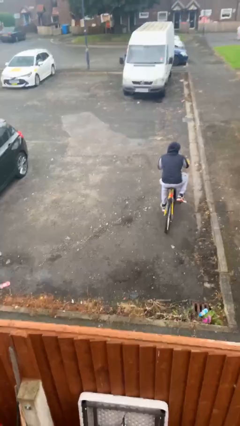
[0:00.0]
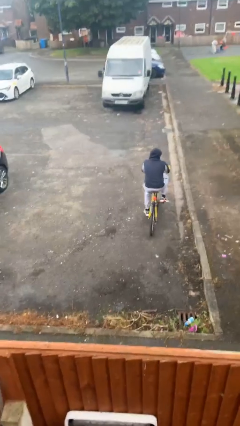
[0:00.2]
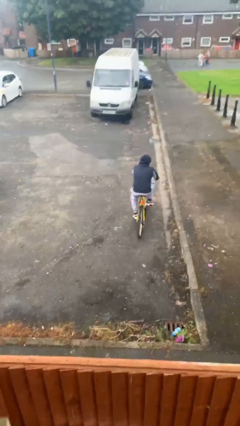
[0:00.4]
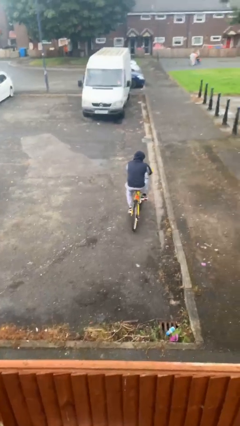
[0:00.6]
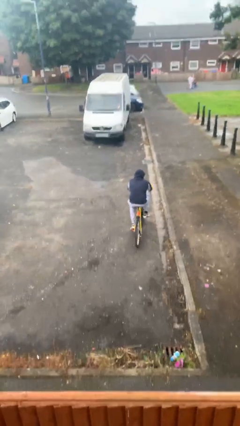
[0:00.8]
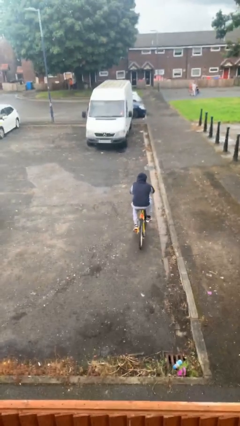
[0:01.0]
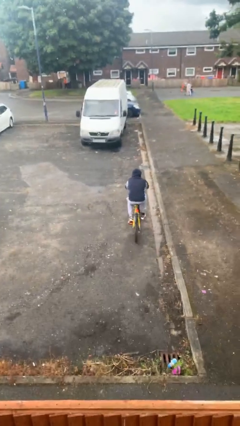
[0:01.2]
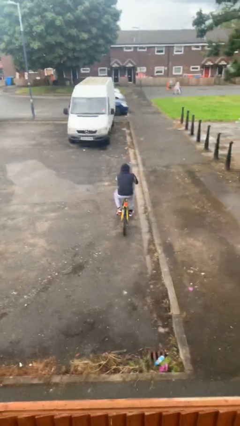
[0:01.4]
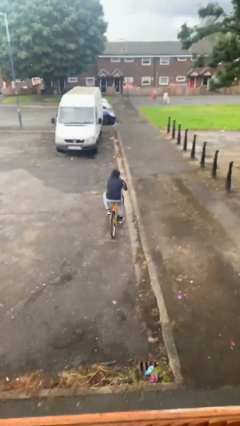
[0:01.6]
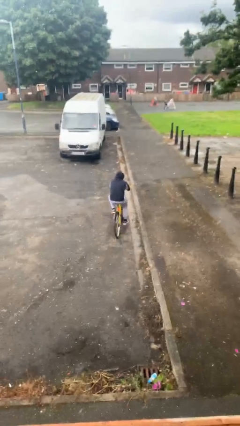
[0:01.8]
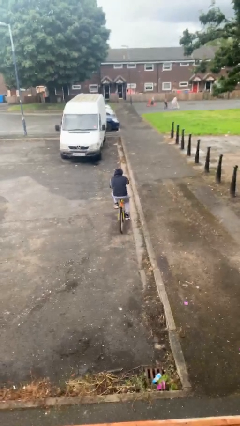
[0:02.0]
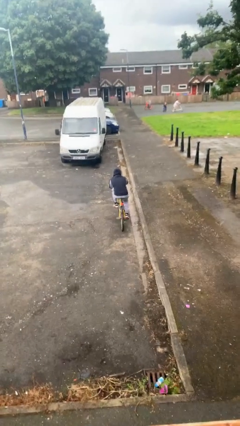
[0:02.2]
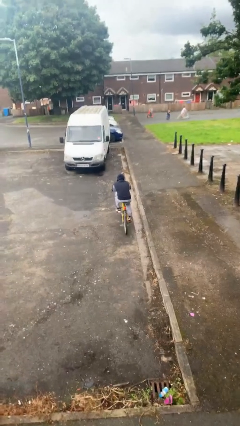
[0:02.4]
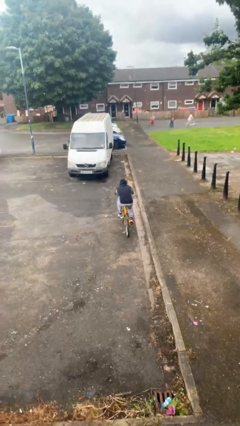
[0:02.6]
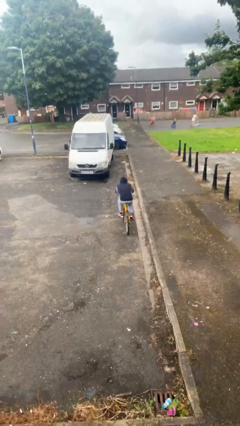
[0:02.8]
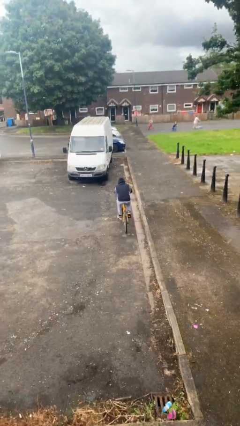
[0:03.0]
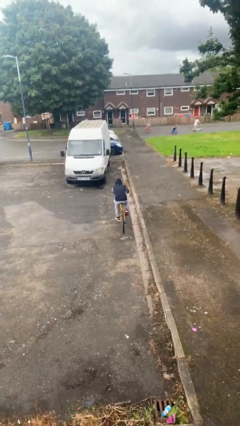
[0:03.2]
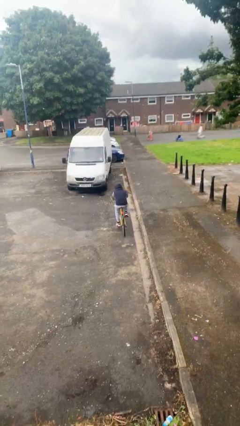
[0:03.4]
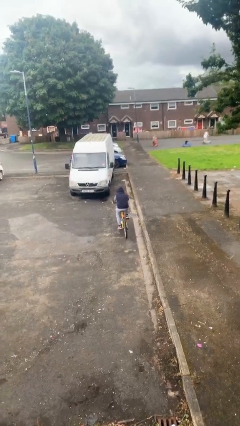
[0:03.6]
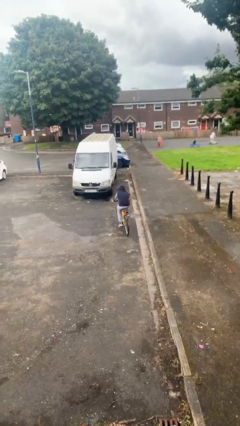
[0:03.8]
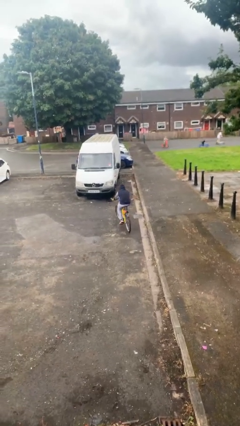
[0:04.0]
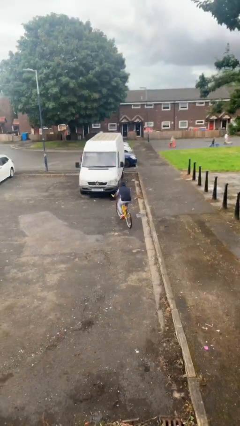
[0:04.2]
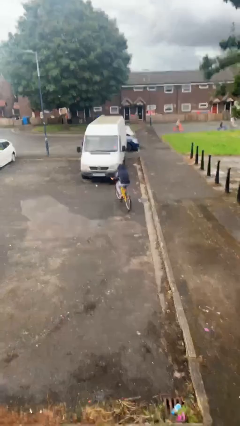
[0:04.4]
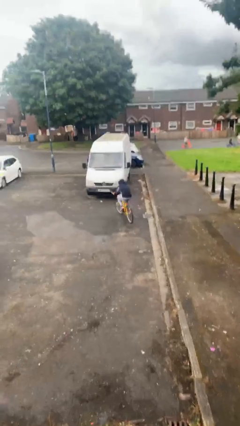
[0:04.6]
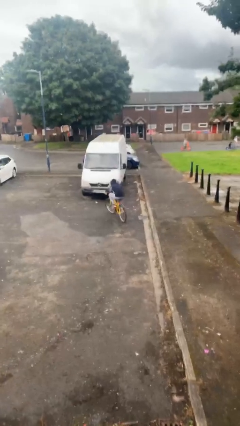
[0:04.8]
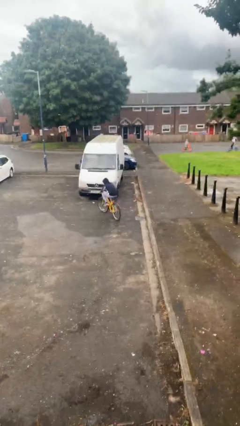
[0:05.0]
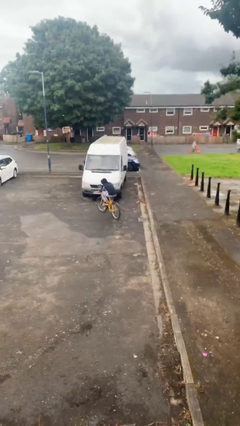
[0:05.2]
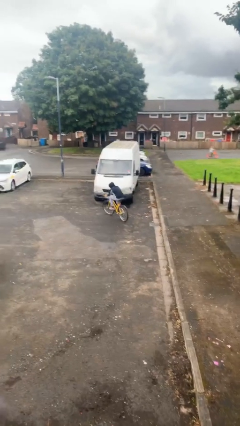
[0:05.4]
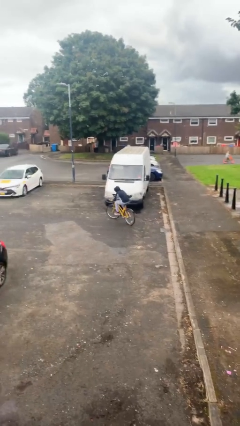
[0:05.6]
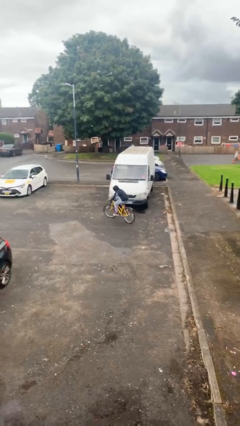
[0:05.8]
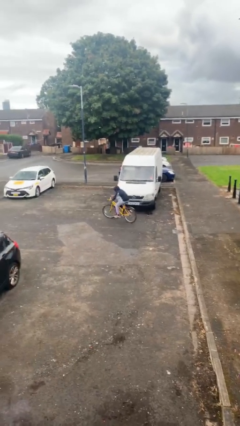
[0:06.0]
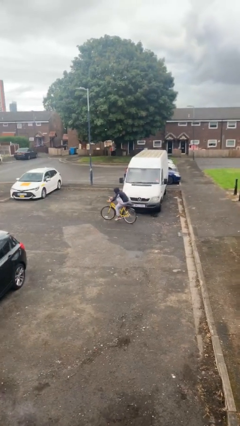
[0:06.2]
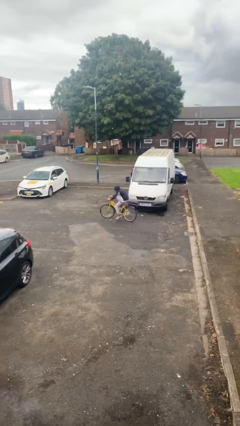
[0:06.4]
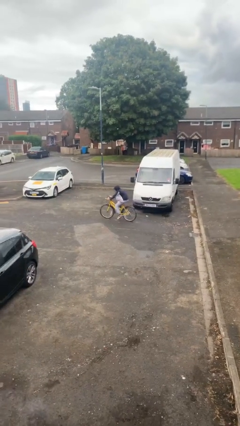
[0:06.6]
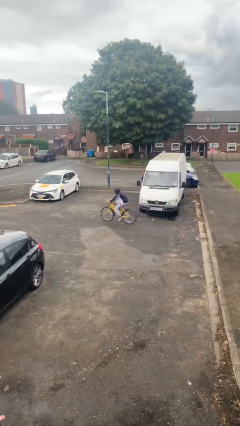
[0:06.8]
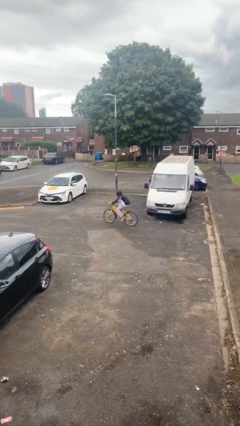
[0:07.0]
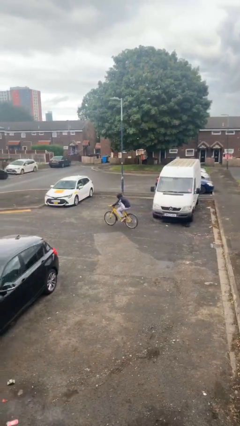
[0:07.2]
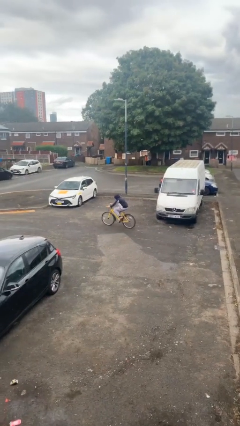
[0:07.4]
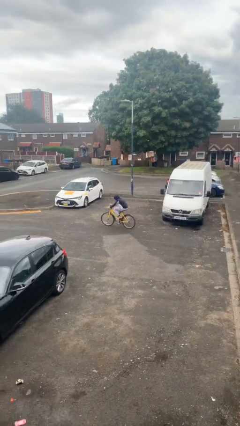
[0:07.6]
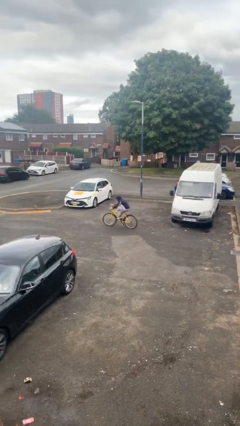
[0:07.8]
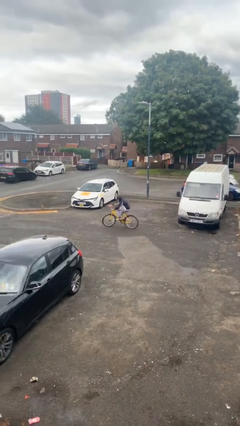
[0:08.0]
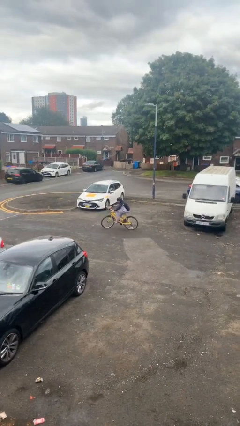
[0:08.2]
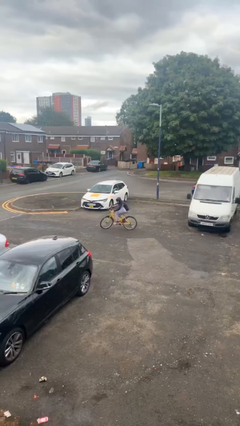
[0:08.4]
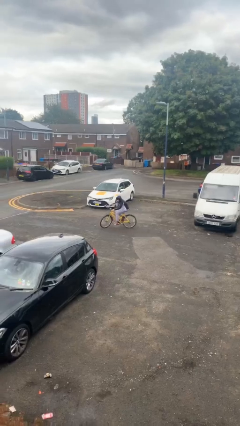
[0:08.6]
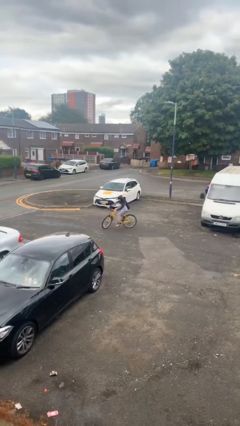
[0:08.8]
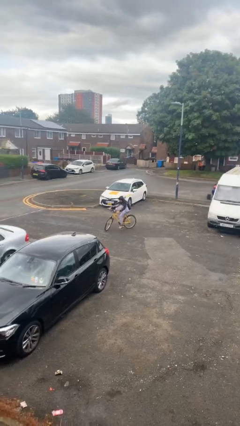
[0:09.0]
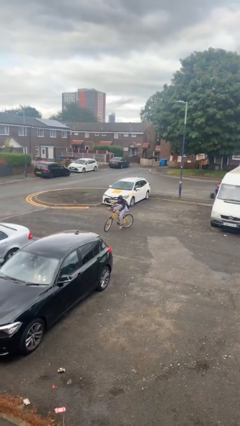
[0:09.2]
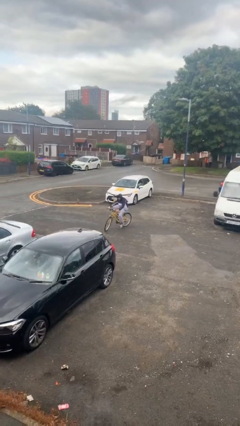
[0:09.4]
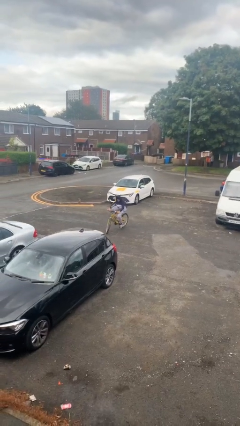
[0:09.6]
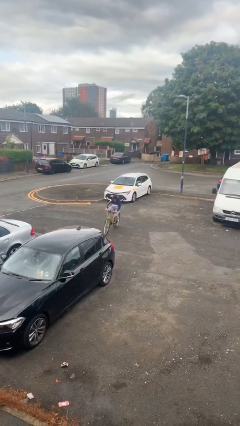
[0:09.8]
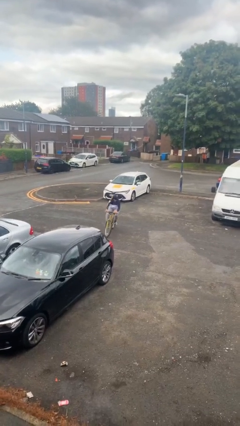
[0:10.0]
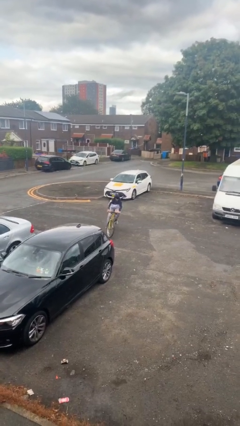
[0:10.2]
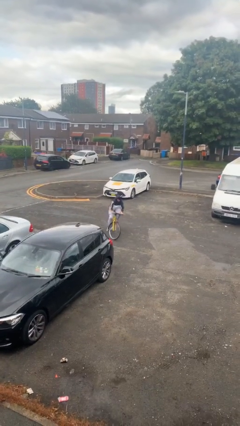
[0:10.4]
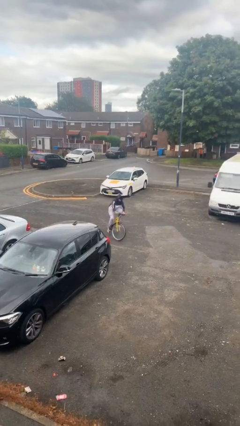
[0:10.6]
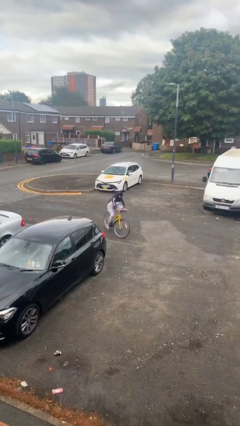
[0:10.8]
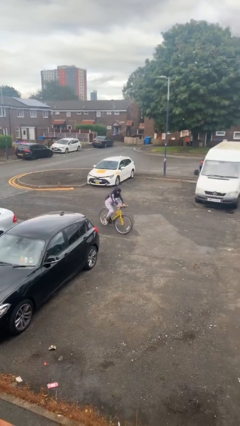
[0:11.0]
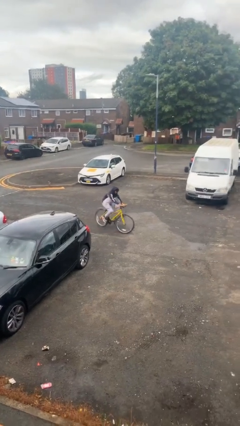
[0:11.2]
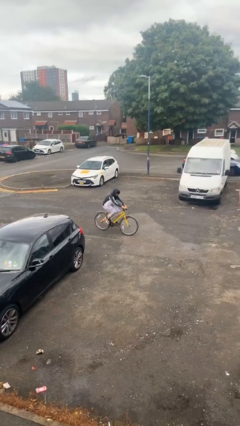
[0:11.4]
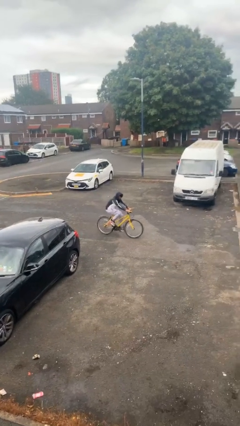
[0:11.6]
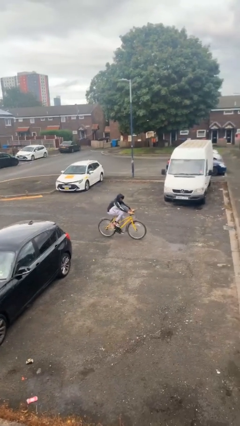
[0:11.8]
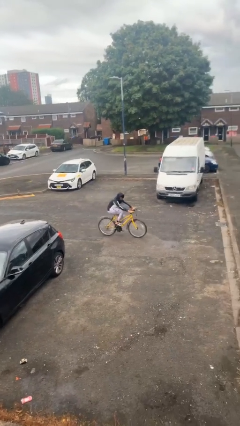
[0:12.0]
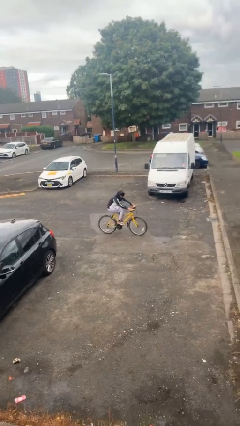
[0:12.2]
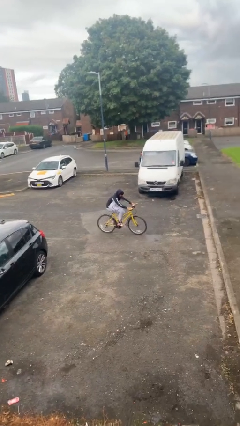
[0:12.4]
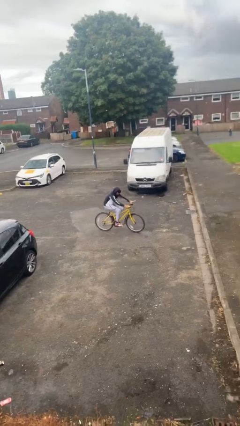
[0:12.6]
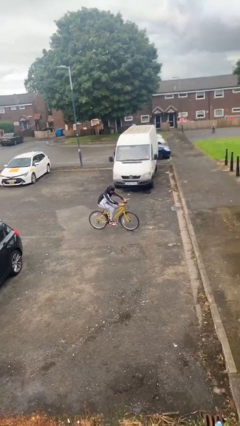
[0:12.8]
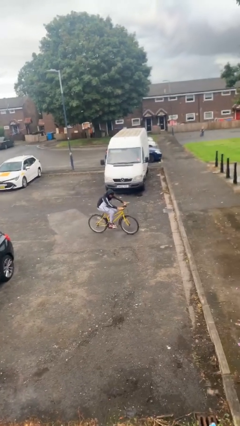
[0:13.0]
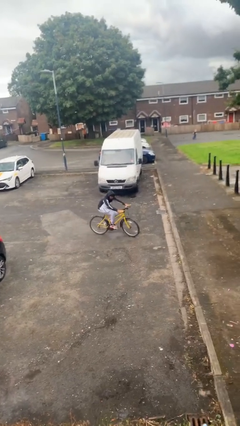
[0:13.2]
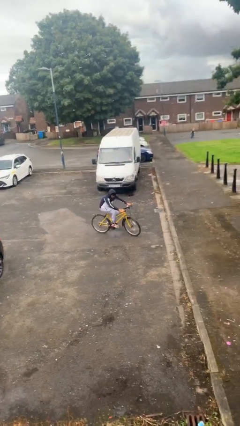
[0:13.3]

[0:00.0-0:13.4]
person rides bicycle

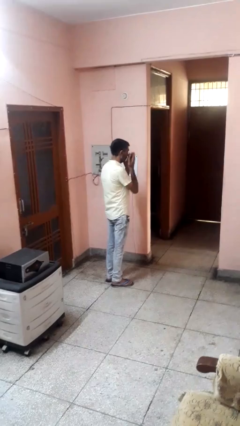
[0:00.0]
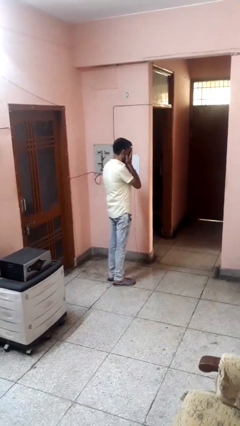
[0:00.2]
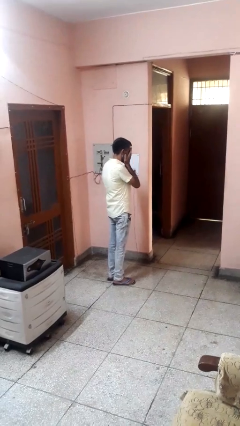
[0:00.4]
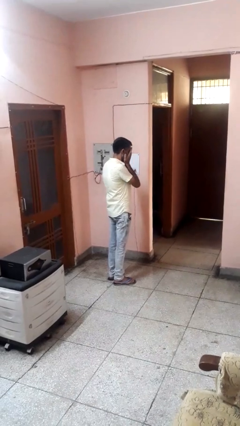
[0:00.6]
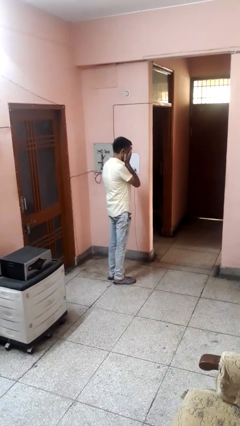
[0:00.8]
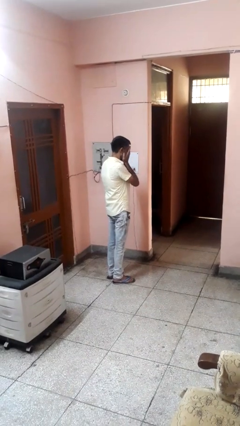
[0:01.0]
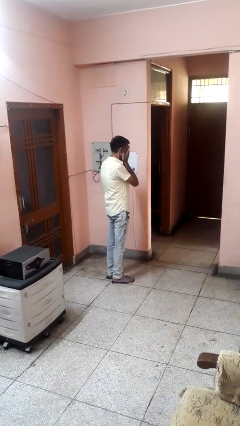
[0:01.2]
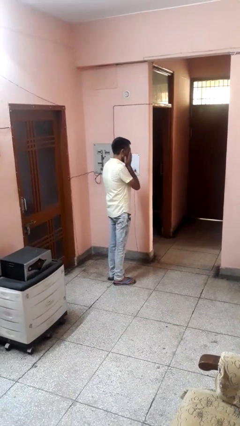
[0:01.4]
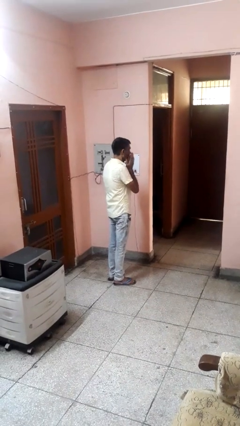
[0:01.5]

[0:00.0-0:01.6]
person covers face with hands

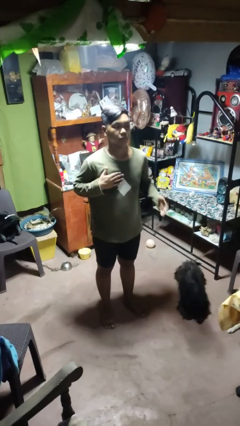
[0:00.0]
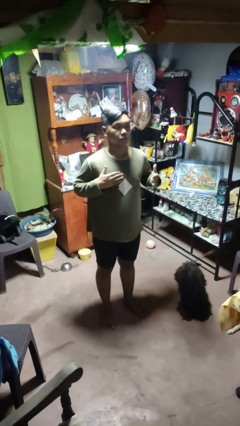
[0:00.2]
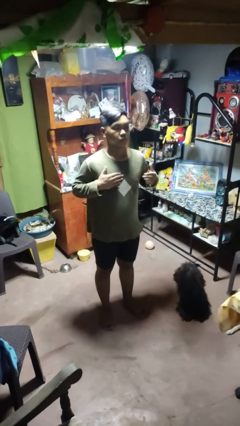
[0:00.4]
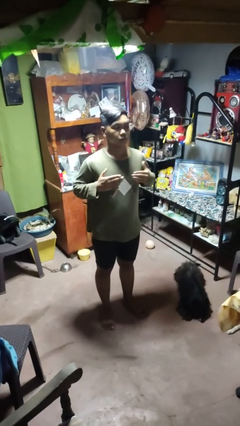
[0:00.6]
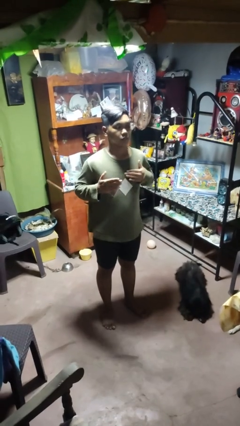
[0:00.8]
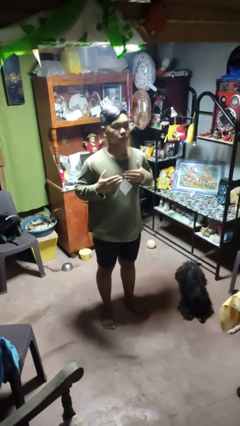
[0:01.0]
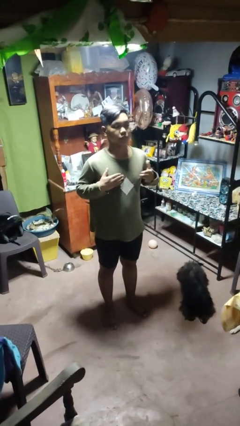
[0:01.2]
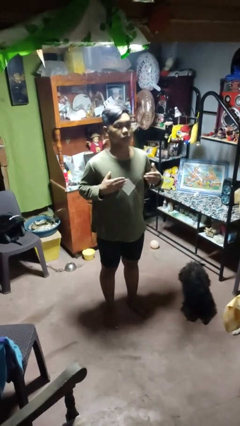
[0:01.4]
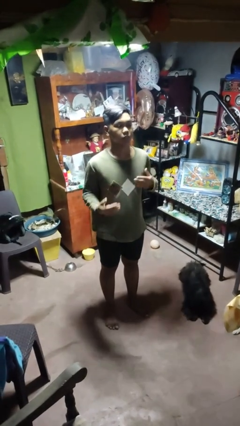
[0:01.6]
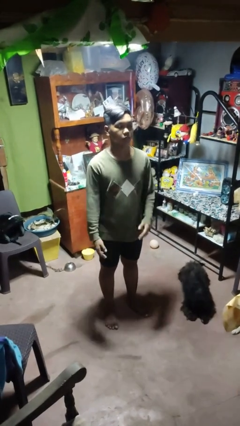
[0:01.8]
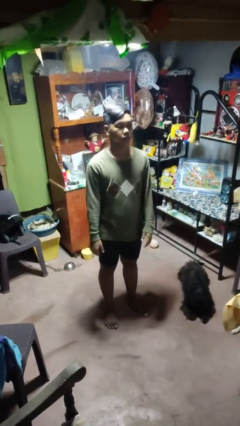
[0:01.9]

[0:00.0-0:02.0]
person drums on chest

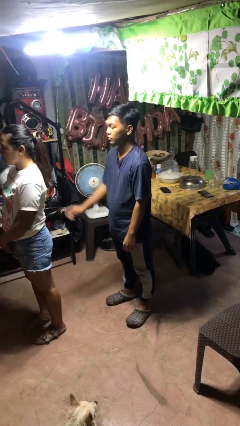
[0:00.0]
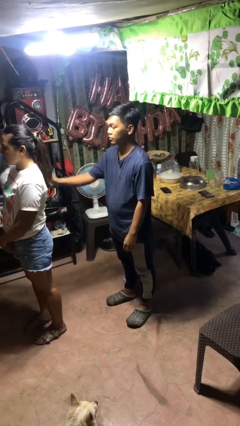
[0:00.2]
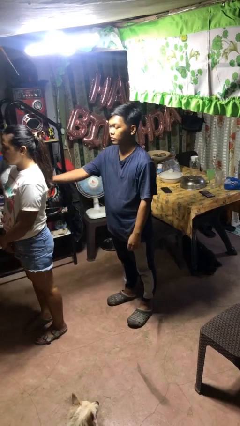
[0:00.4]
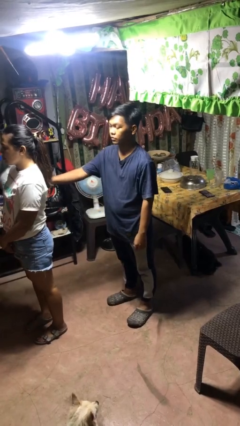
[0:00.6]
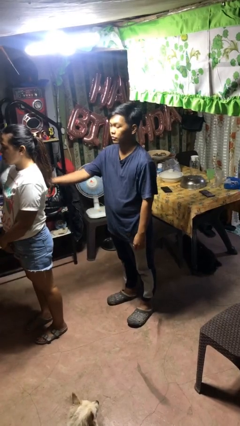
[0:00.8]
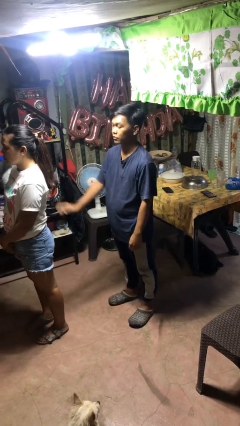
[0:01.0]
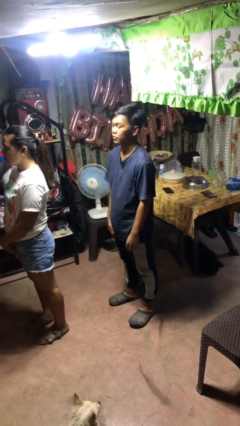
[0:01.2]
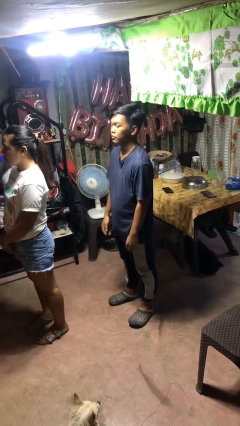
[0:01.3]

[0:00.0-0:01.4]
person touches back of person
